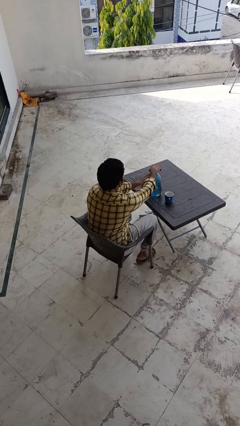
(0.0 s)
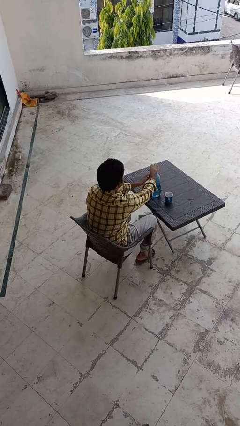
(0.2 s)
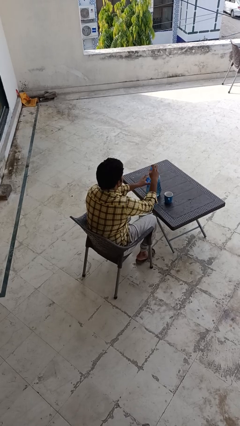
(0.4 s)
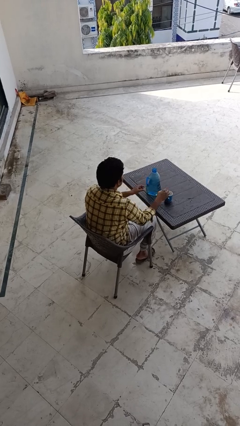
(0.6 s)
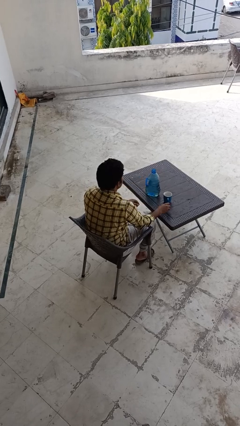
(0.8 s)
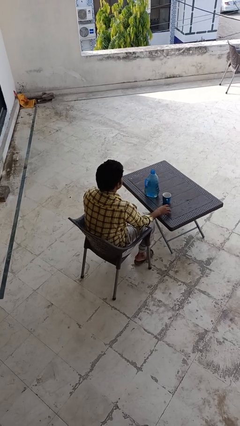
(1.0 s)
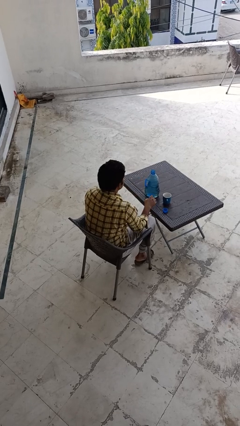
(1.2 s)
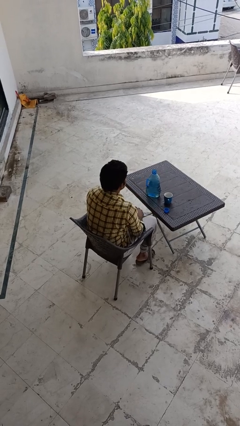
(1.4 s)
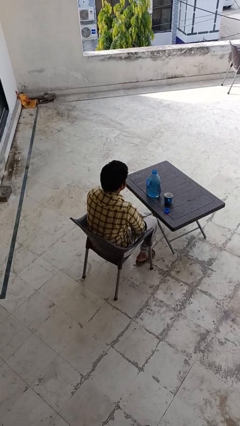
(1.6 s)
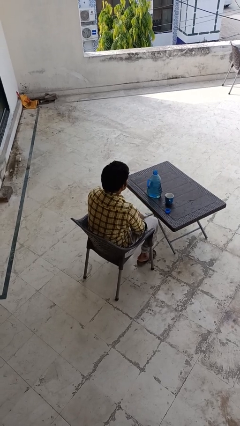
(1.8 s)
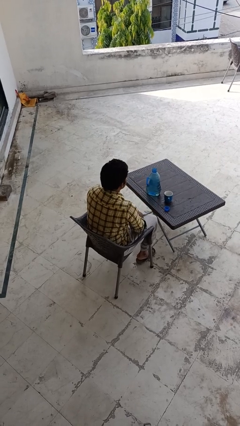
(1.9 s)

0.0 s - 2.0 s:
person unscrews lid from bottle

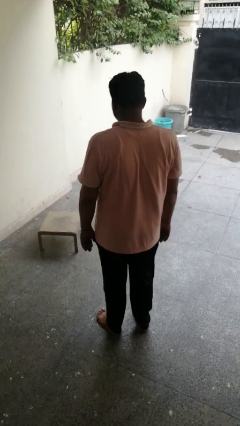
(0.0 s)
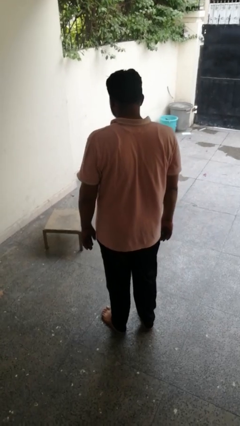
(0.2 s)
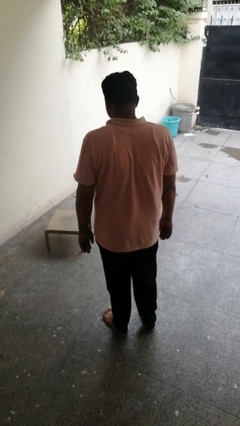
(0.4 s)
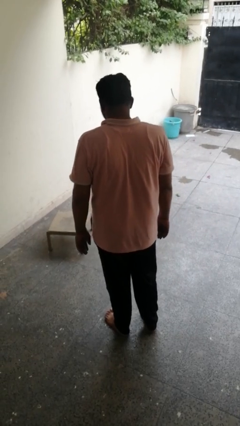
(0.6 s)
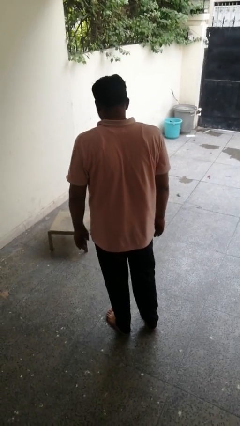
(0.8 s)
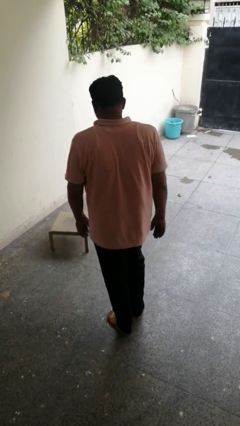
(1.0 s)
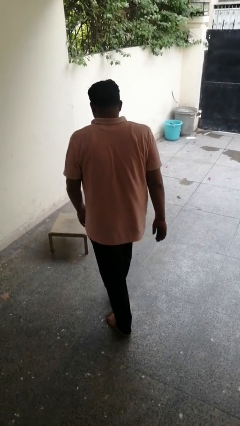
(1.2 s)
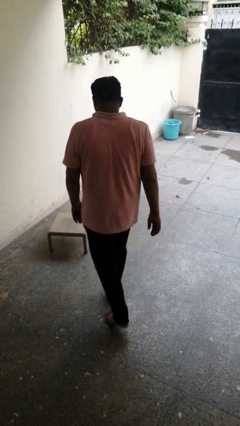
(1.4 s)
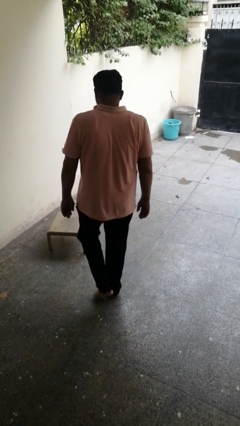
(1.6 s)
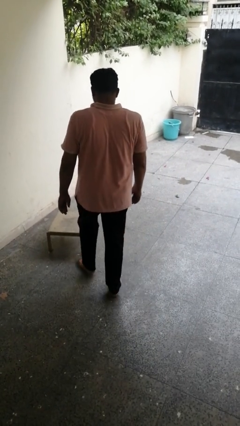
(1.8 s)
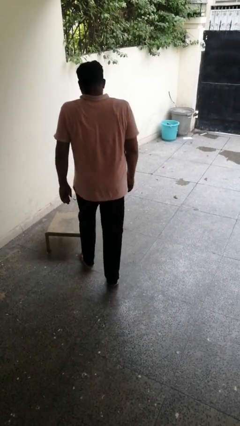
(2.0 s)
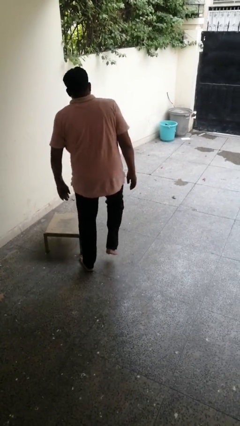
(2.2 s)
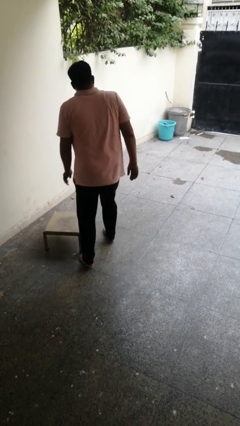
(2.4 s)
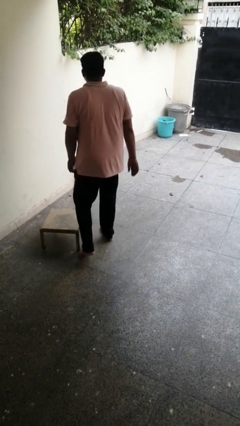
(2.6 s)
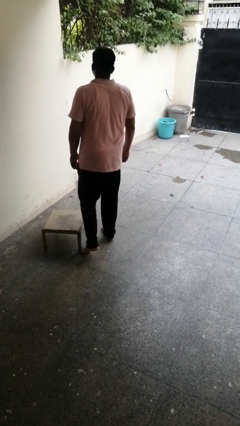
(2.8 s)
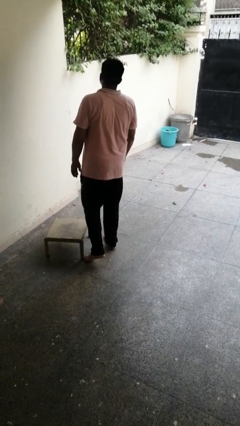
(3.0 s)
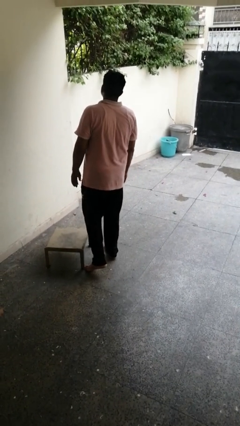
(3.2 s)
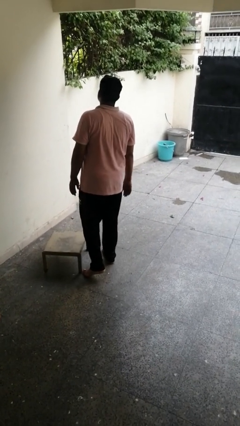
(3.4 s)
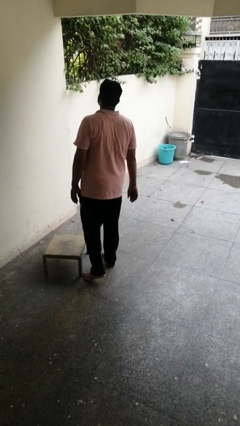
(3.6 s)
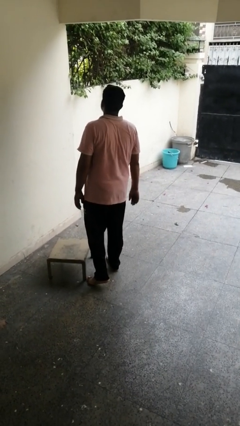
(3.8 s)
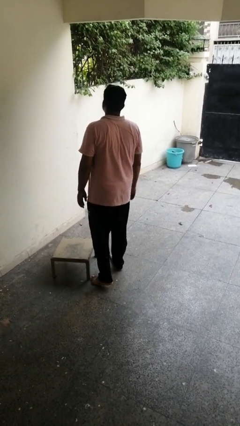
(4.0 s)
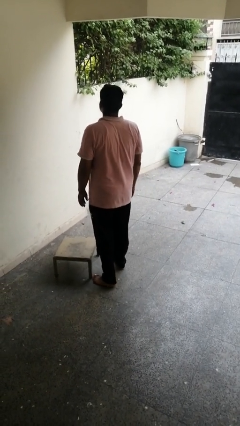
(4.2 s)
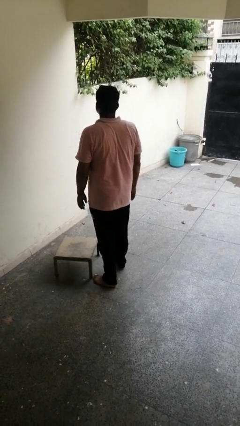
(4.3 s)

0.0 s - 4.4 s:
person stubs toe

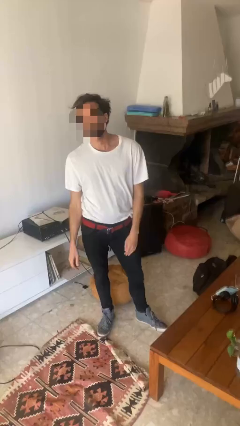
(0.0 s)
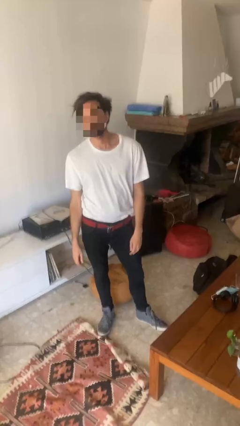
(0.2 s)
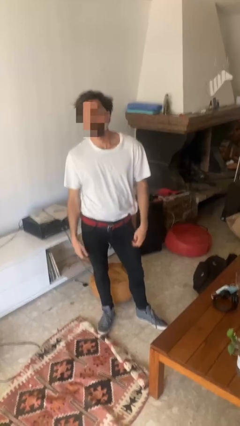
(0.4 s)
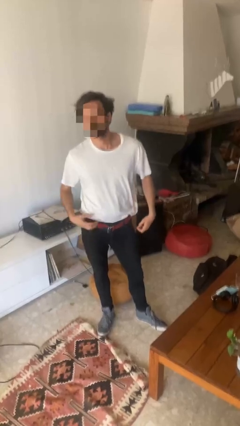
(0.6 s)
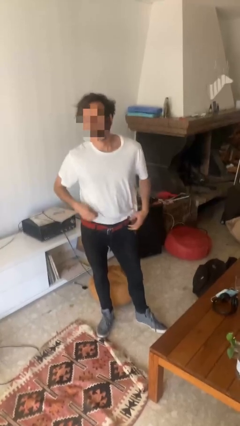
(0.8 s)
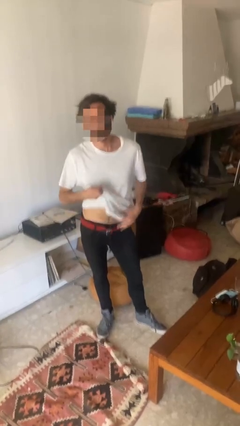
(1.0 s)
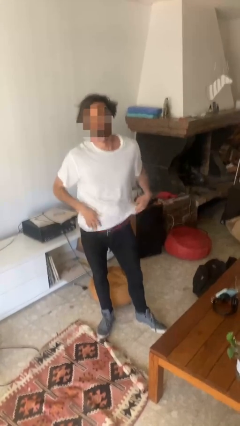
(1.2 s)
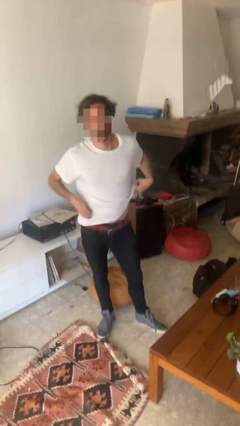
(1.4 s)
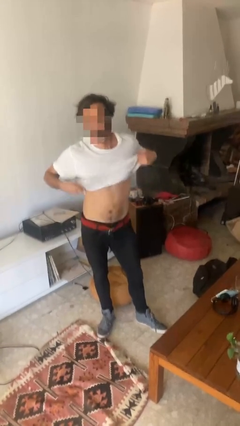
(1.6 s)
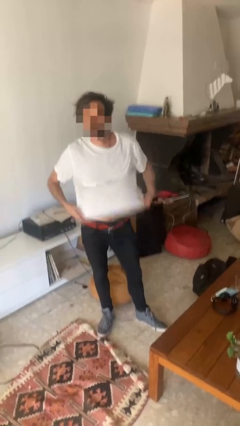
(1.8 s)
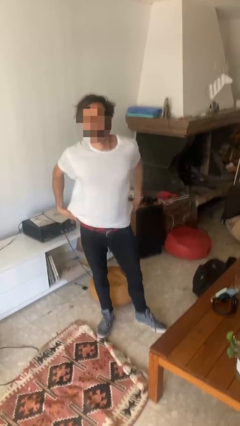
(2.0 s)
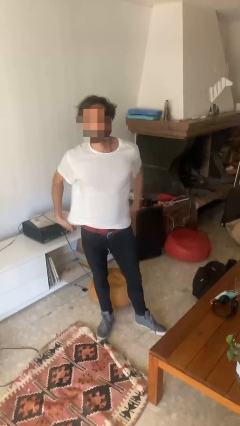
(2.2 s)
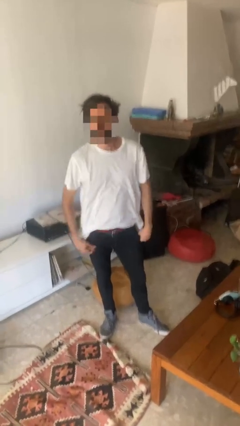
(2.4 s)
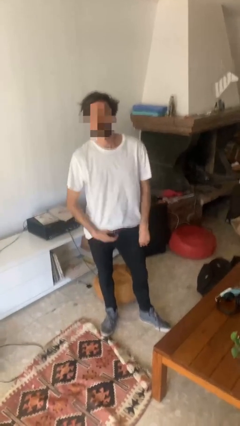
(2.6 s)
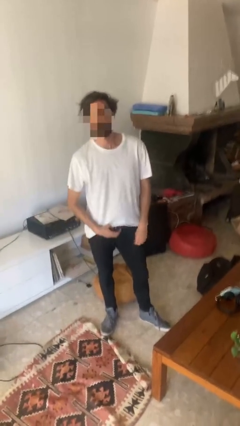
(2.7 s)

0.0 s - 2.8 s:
person untucks shirt

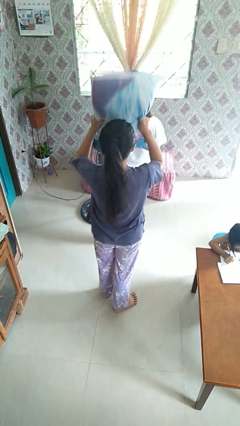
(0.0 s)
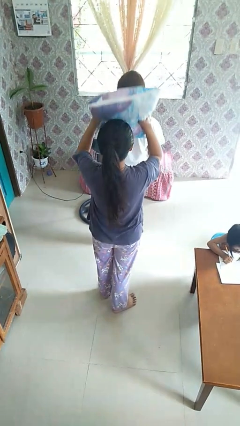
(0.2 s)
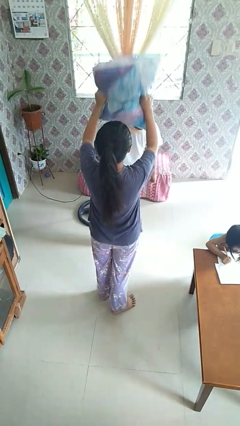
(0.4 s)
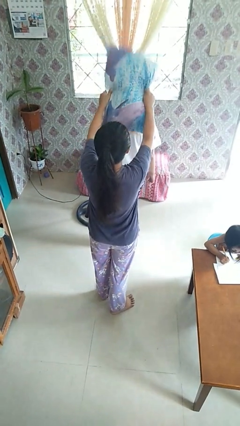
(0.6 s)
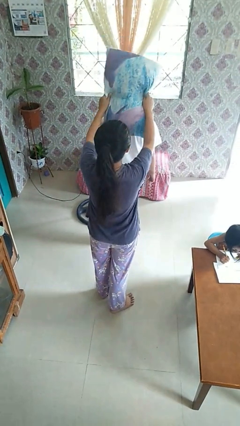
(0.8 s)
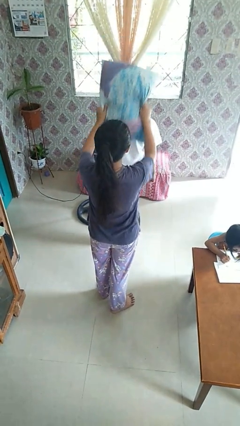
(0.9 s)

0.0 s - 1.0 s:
person hits person with pillow

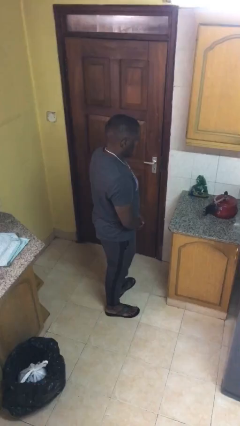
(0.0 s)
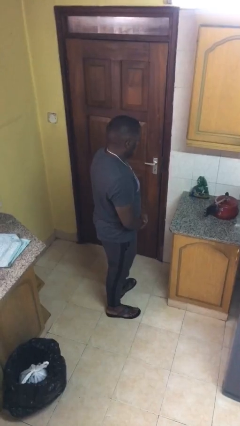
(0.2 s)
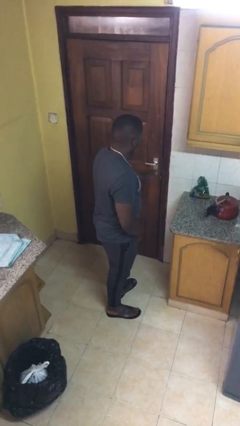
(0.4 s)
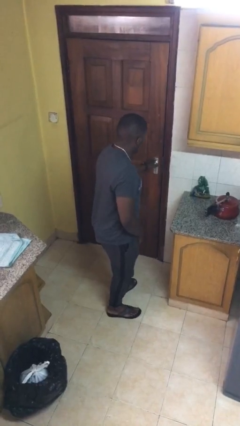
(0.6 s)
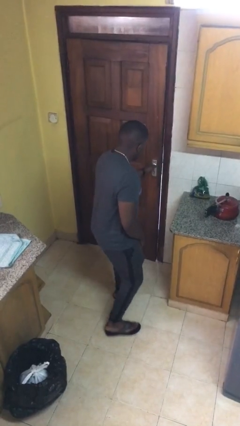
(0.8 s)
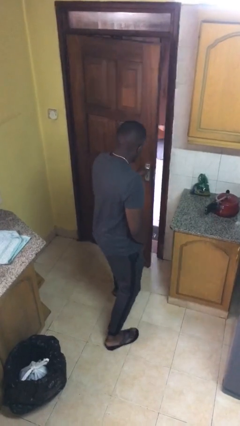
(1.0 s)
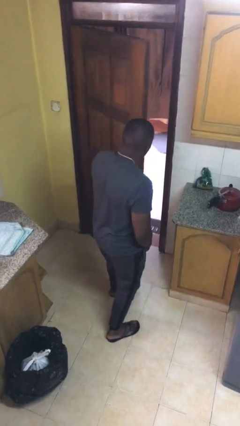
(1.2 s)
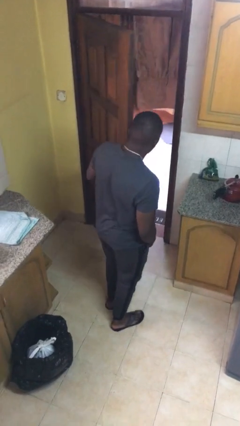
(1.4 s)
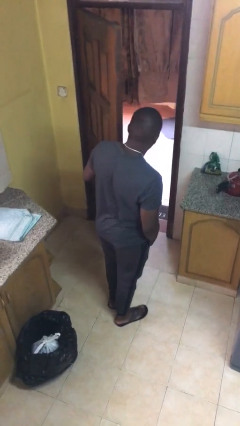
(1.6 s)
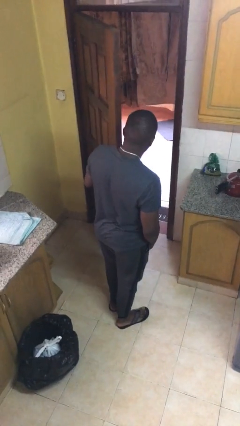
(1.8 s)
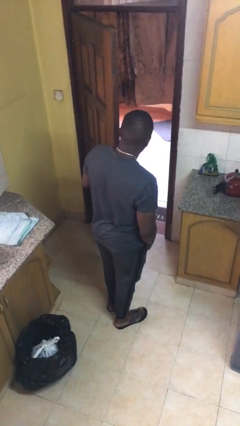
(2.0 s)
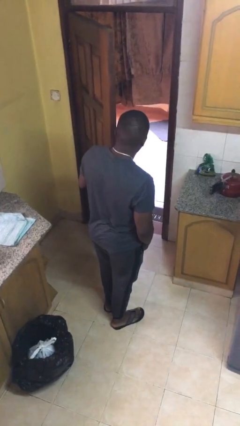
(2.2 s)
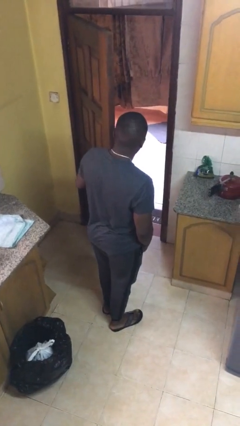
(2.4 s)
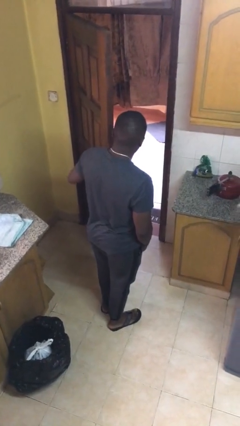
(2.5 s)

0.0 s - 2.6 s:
person opens facility door

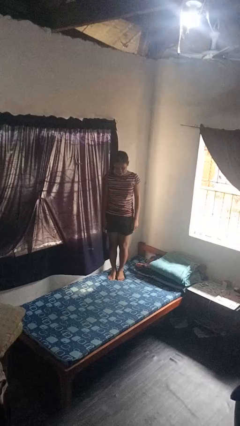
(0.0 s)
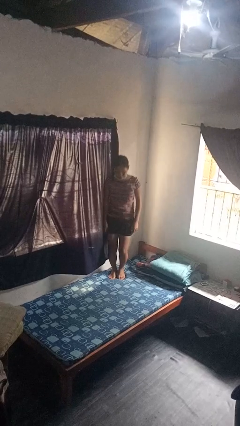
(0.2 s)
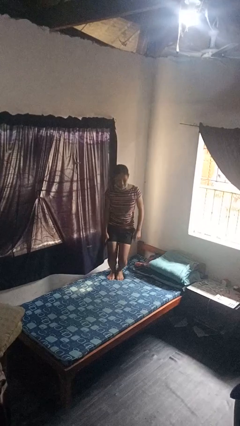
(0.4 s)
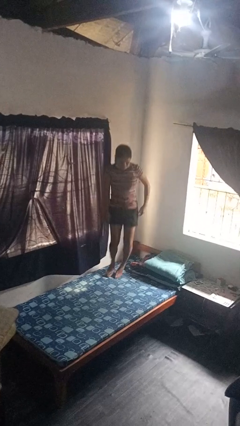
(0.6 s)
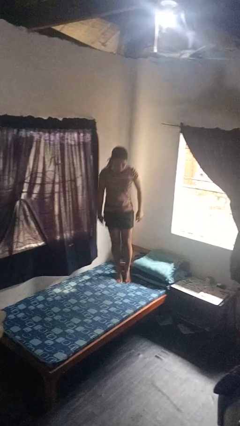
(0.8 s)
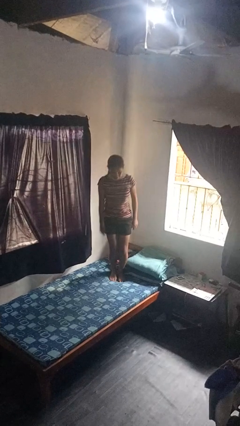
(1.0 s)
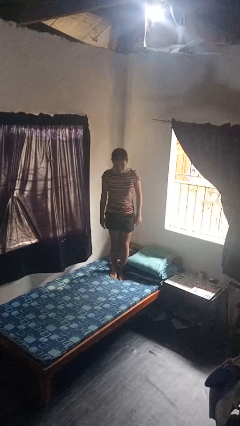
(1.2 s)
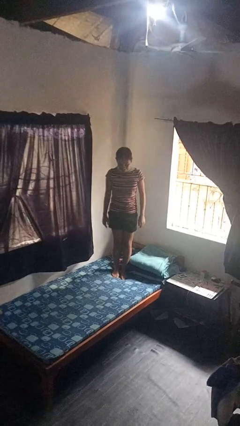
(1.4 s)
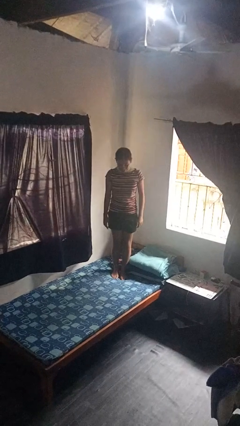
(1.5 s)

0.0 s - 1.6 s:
person jumps on bed

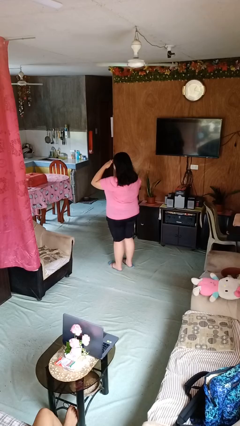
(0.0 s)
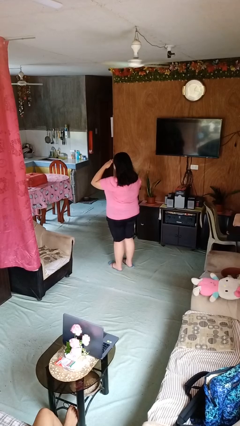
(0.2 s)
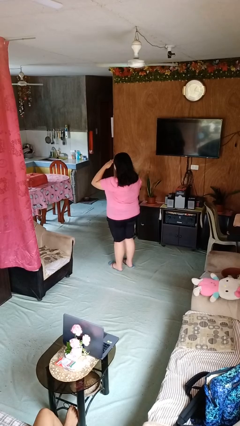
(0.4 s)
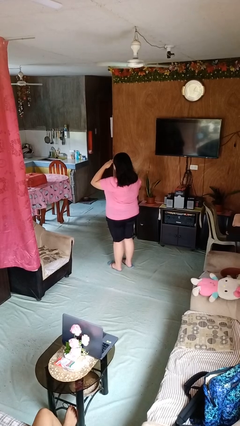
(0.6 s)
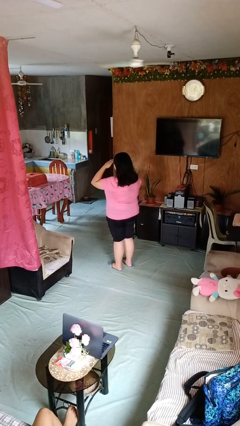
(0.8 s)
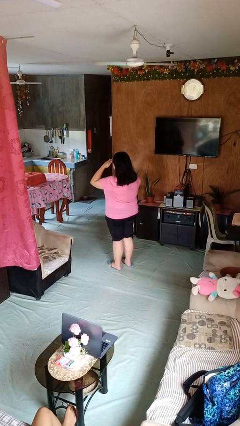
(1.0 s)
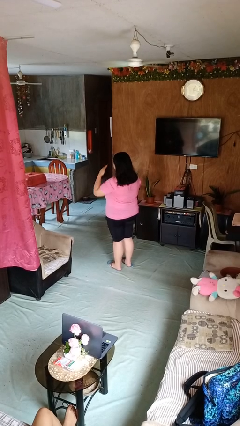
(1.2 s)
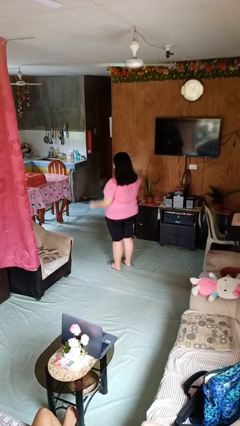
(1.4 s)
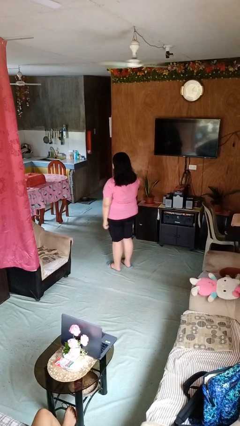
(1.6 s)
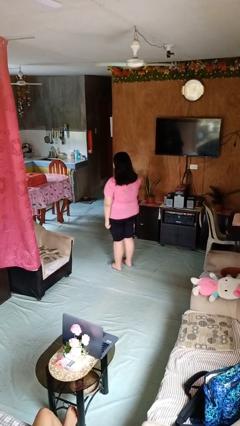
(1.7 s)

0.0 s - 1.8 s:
person salutes

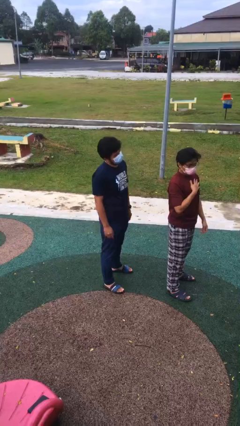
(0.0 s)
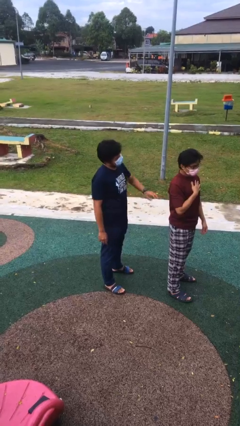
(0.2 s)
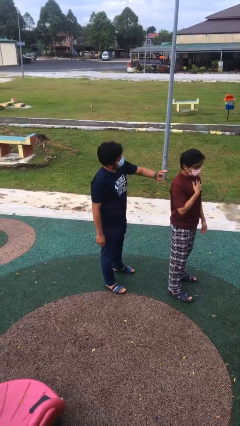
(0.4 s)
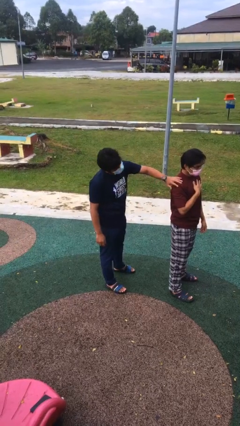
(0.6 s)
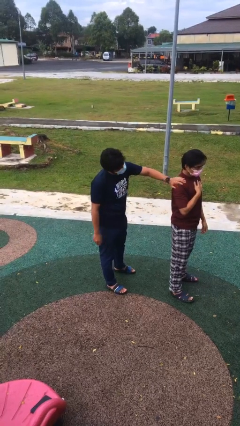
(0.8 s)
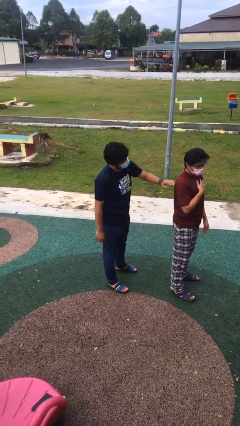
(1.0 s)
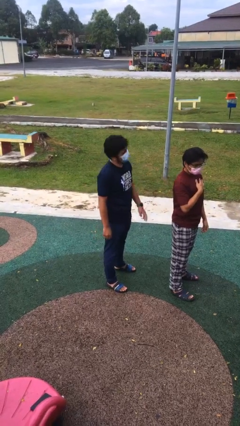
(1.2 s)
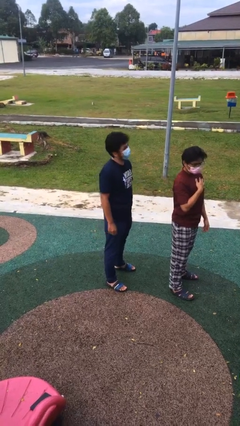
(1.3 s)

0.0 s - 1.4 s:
person touches back of person
